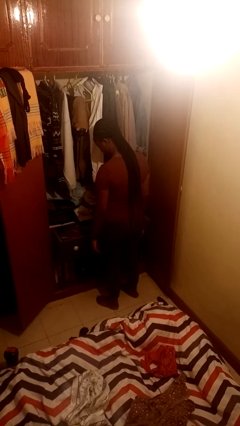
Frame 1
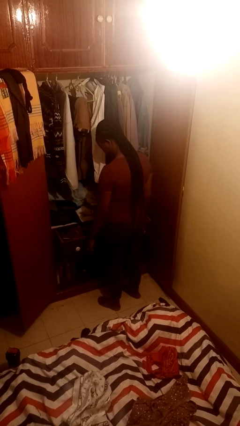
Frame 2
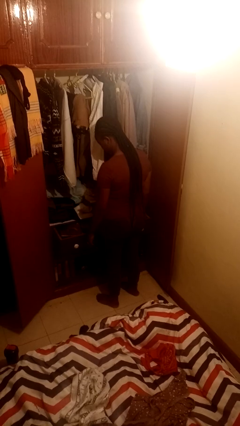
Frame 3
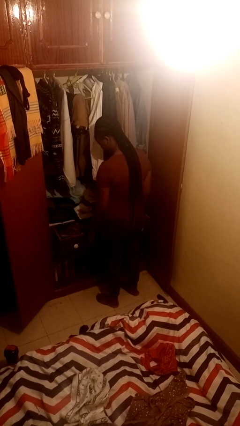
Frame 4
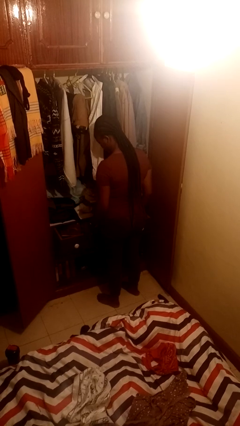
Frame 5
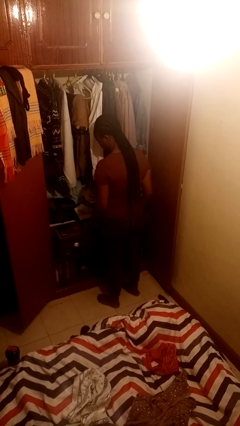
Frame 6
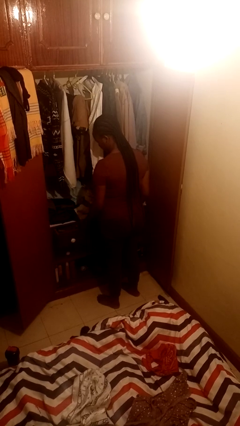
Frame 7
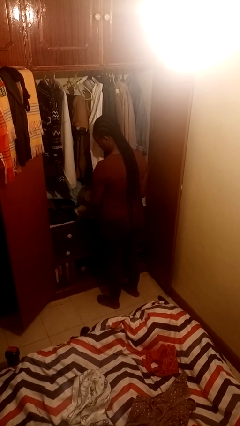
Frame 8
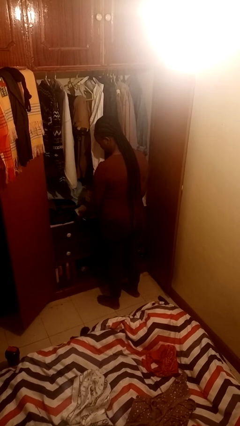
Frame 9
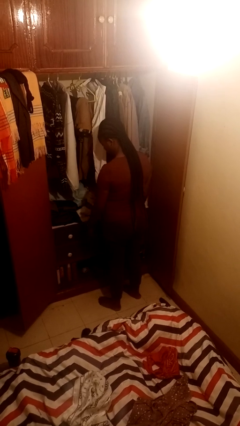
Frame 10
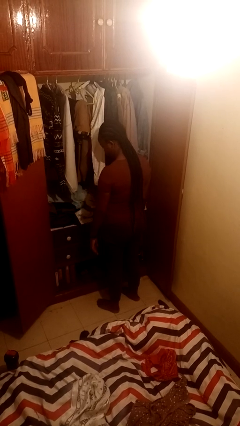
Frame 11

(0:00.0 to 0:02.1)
person closes dresser drawer

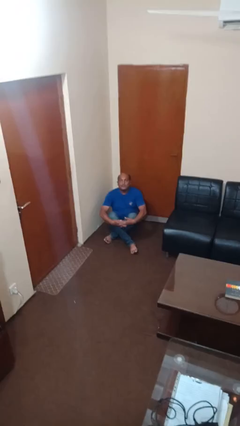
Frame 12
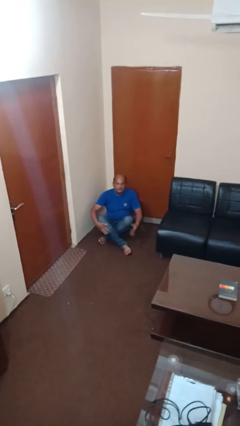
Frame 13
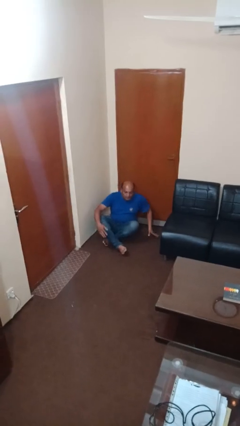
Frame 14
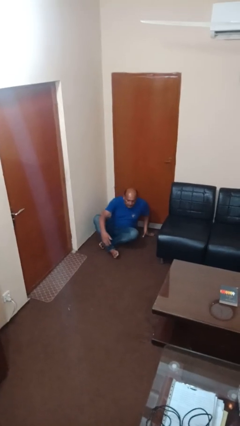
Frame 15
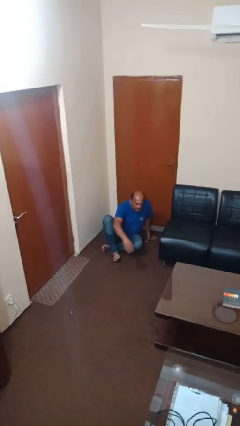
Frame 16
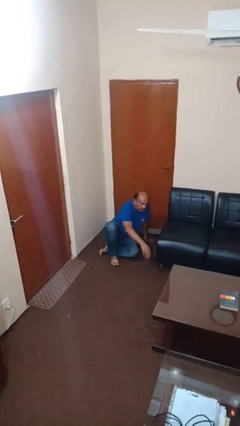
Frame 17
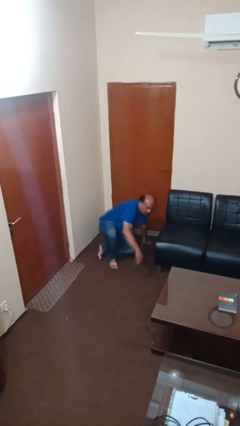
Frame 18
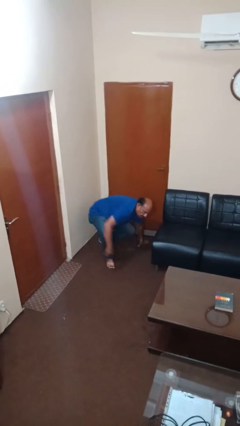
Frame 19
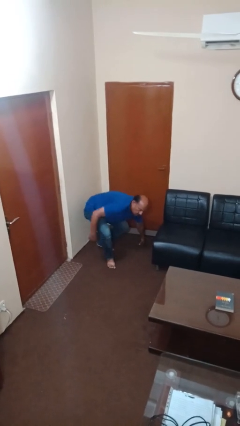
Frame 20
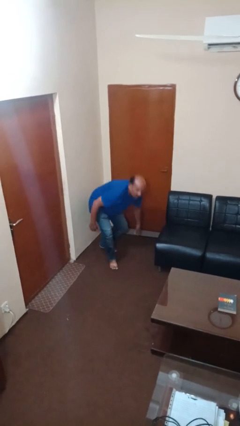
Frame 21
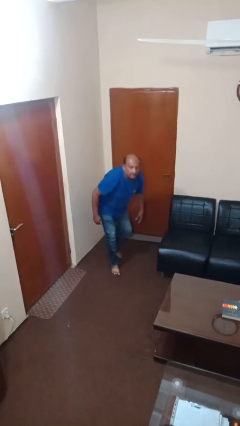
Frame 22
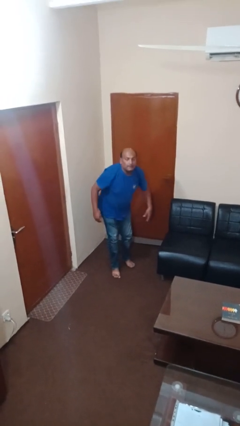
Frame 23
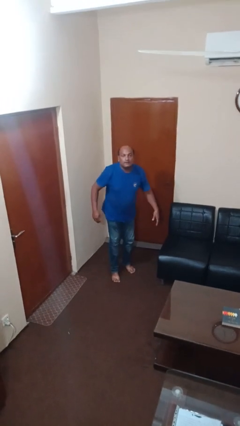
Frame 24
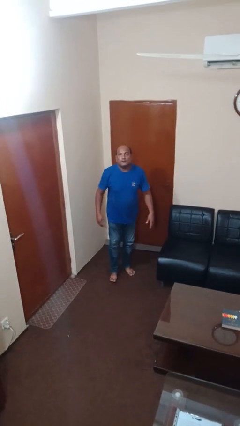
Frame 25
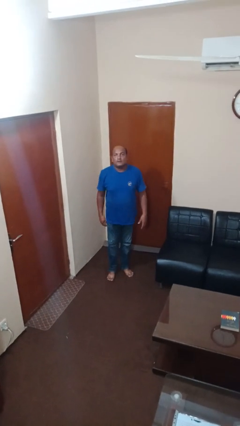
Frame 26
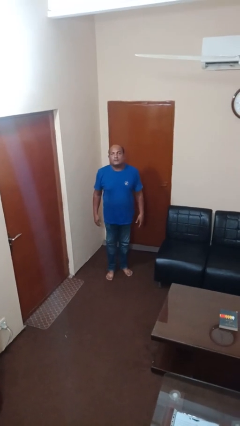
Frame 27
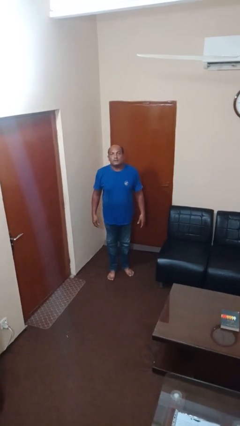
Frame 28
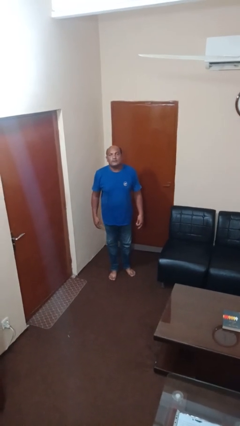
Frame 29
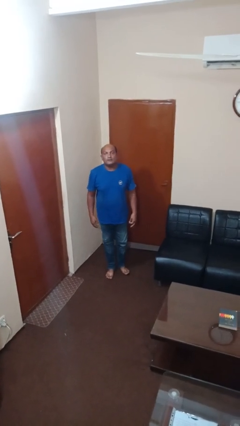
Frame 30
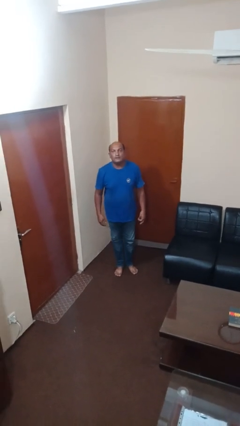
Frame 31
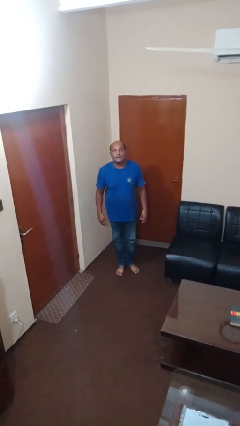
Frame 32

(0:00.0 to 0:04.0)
person stands up from floor

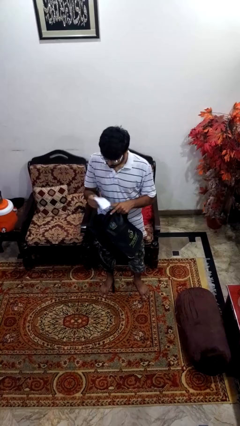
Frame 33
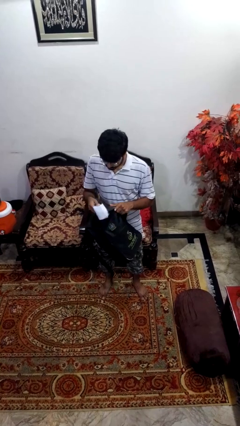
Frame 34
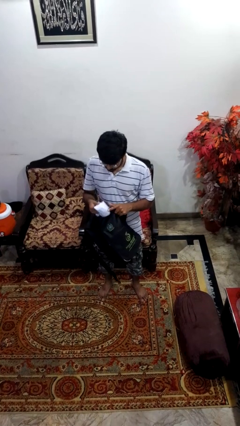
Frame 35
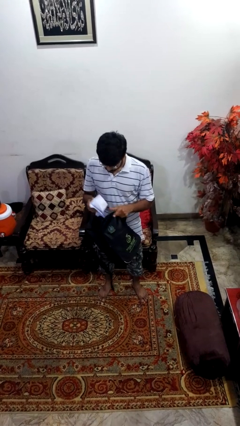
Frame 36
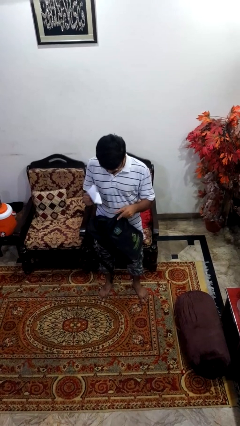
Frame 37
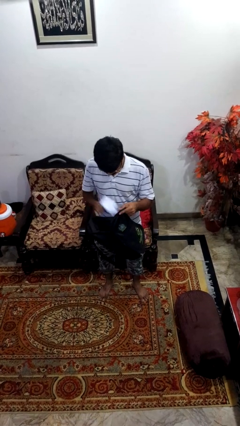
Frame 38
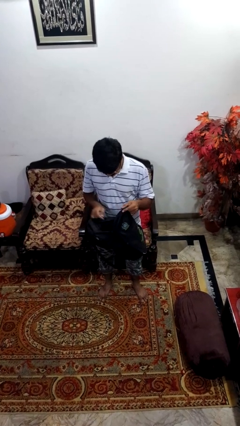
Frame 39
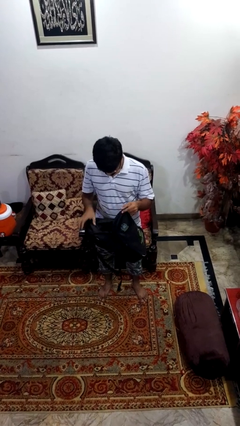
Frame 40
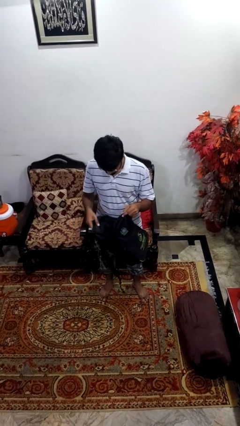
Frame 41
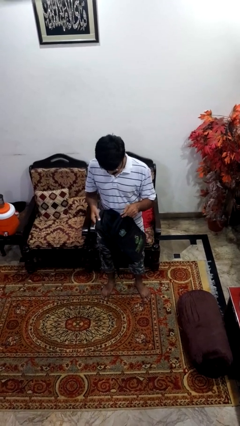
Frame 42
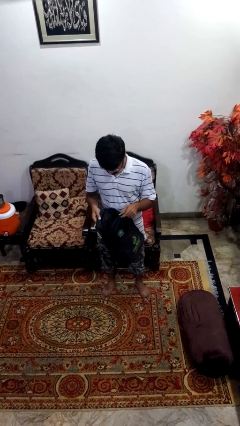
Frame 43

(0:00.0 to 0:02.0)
person puts object into backpack

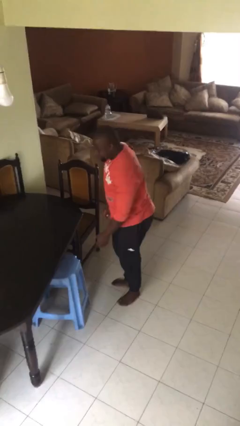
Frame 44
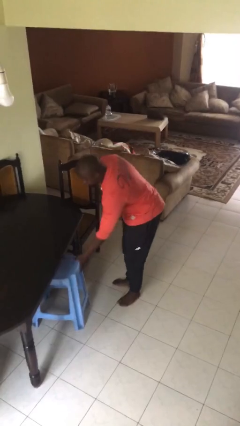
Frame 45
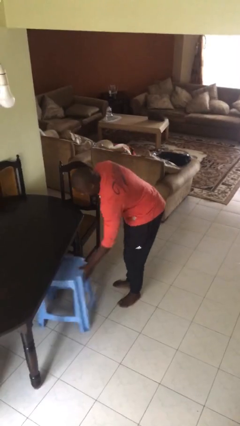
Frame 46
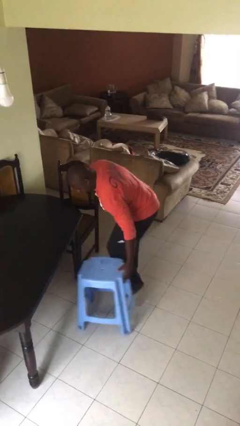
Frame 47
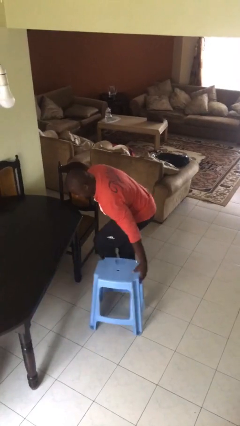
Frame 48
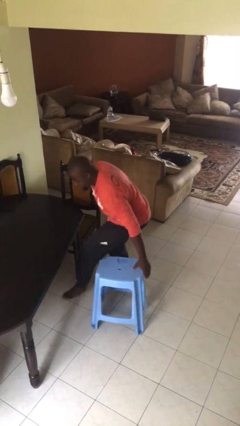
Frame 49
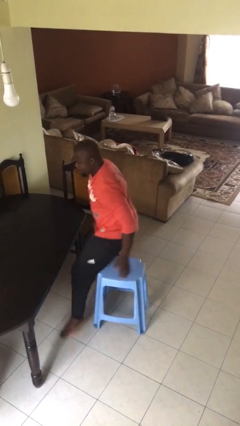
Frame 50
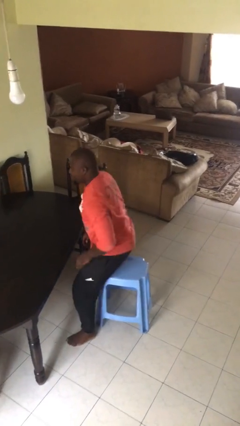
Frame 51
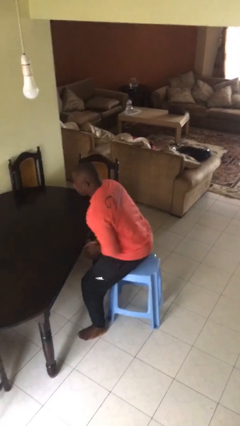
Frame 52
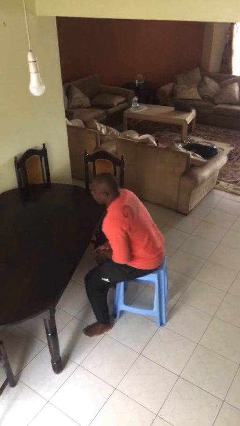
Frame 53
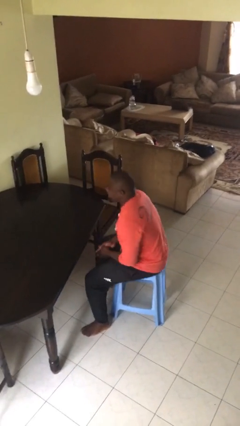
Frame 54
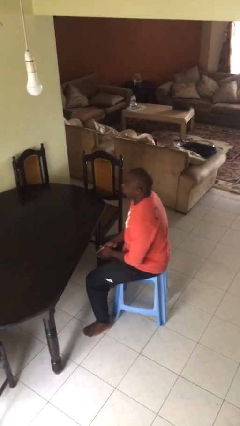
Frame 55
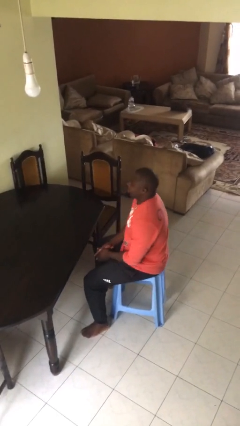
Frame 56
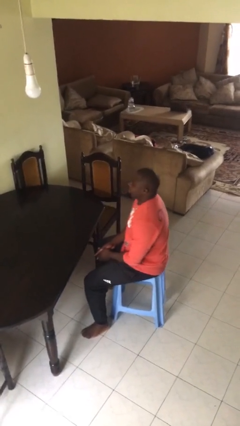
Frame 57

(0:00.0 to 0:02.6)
person sits down

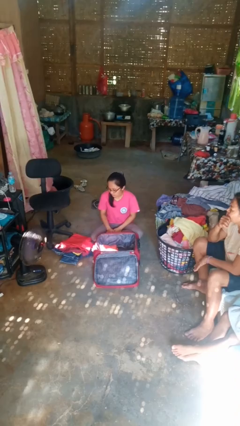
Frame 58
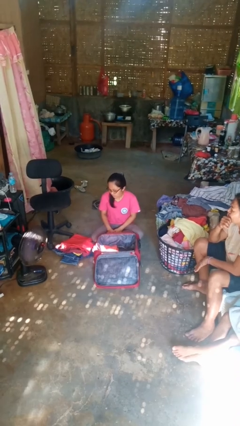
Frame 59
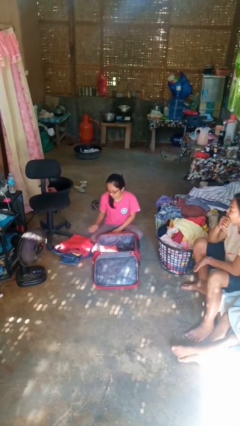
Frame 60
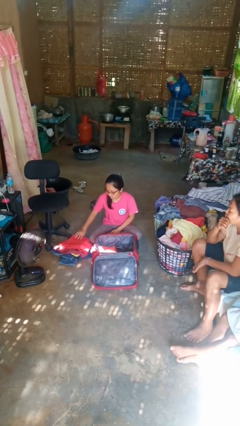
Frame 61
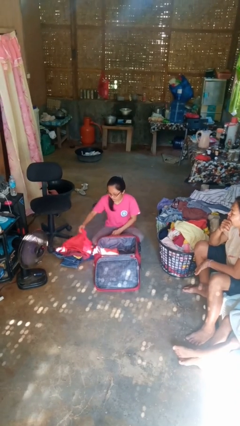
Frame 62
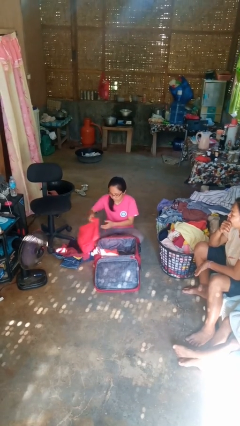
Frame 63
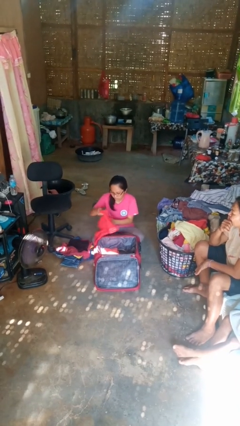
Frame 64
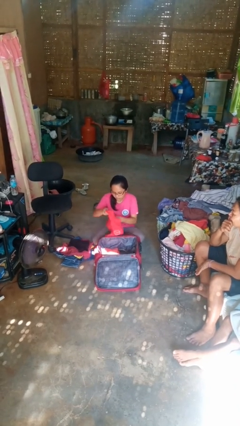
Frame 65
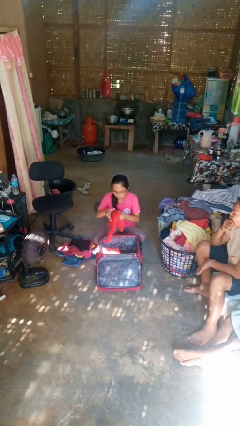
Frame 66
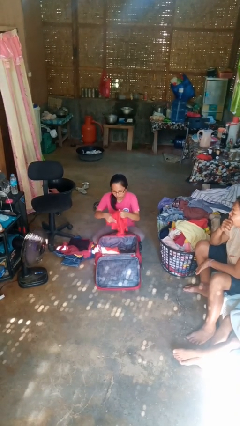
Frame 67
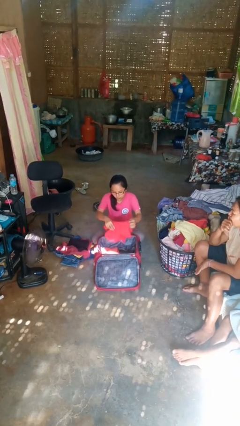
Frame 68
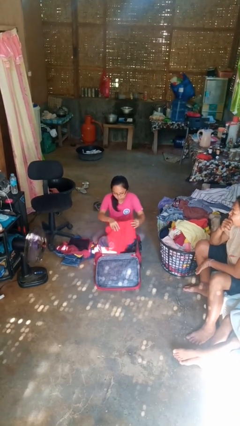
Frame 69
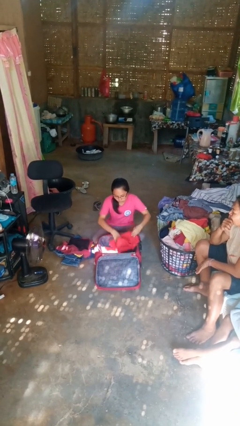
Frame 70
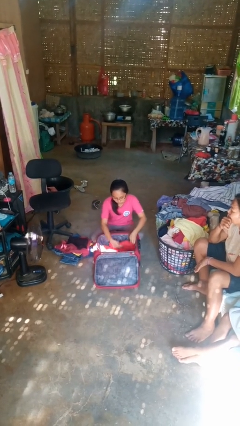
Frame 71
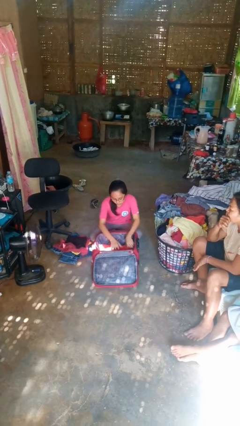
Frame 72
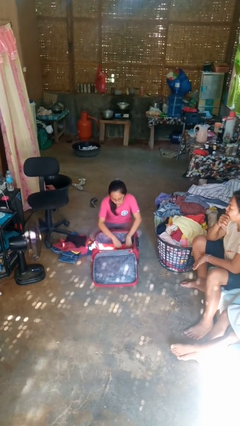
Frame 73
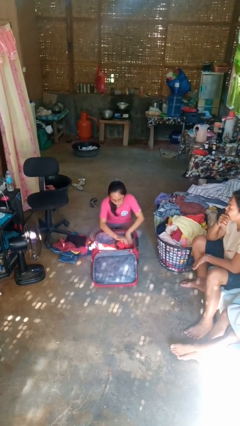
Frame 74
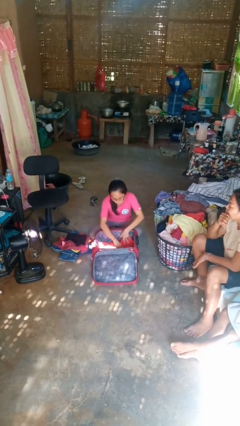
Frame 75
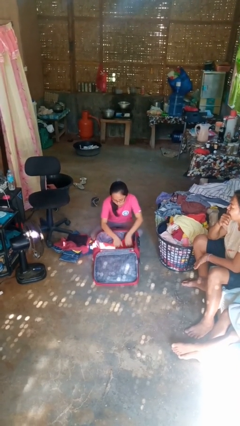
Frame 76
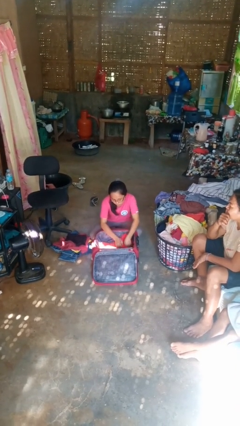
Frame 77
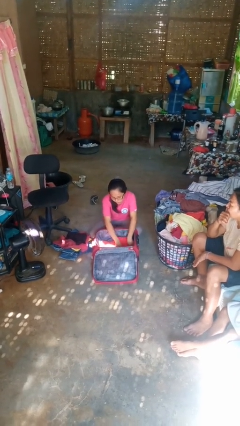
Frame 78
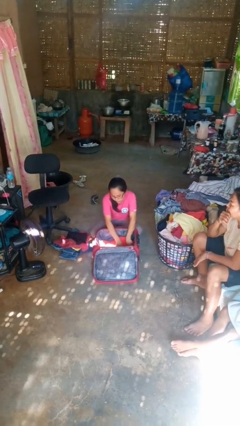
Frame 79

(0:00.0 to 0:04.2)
person loads clothes into suitcase

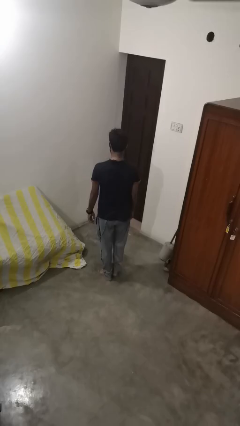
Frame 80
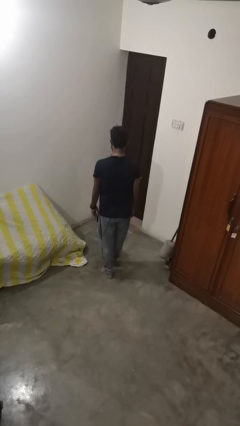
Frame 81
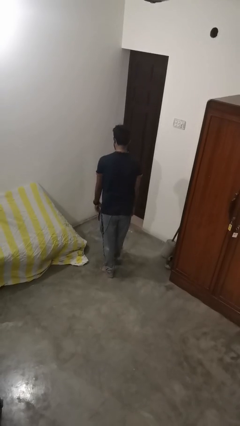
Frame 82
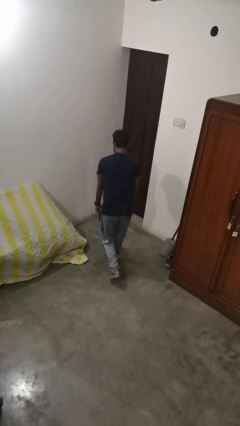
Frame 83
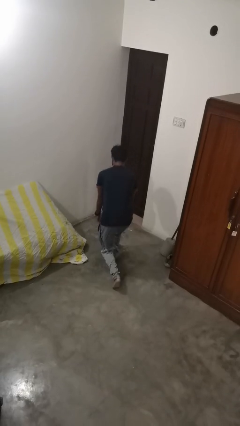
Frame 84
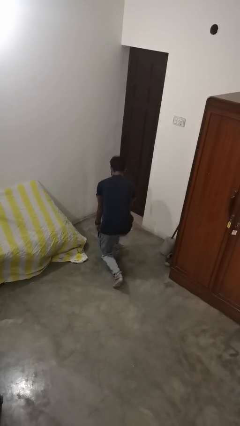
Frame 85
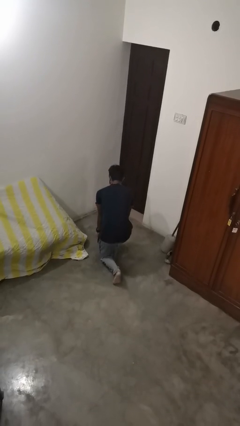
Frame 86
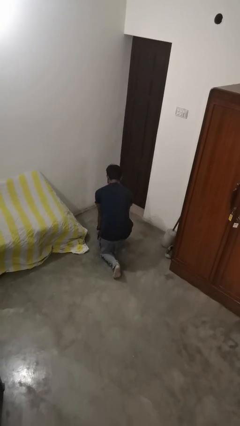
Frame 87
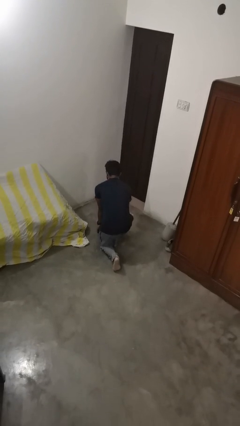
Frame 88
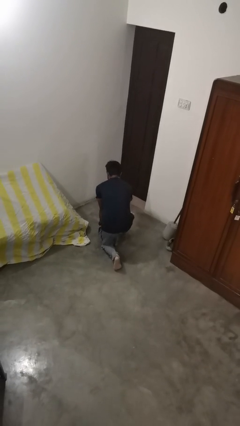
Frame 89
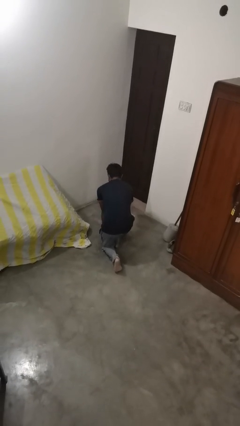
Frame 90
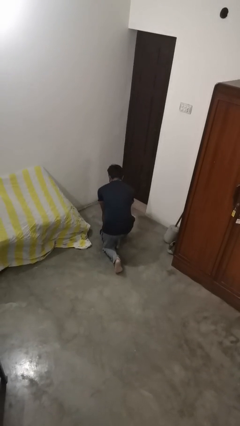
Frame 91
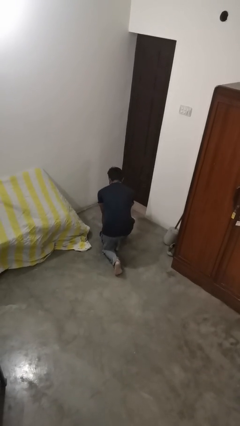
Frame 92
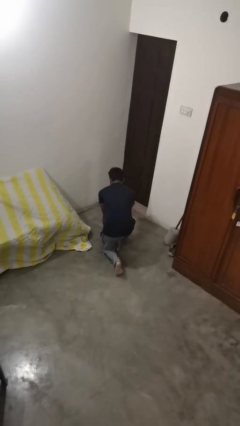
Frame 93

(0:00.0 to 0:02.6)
person kneels
